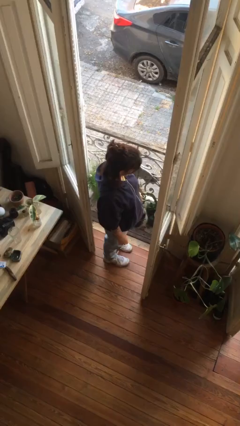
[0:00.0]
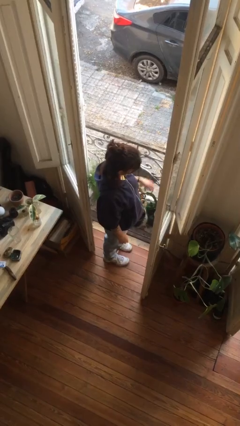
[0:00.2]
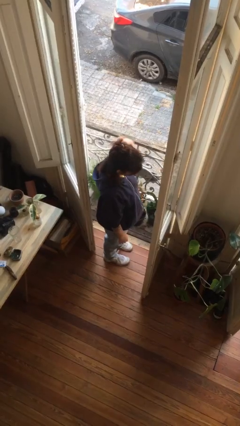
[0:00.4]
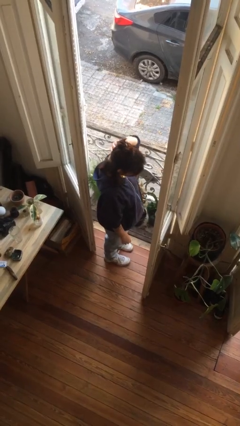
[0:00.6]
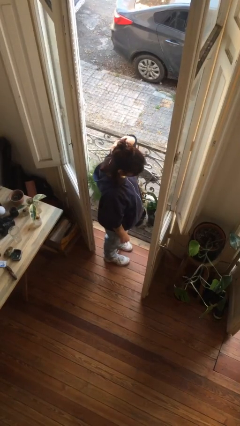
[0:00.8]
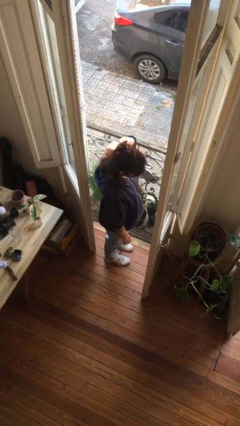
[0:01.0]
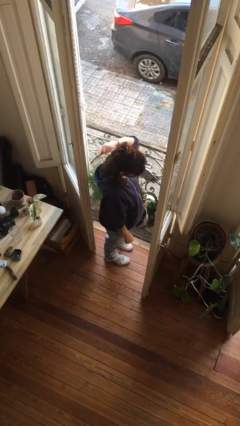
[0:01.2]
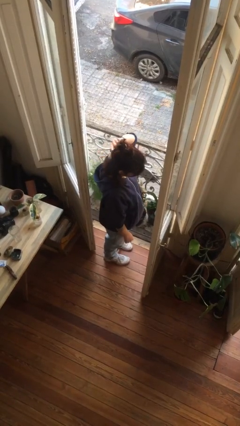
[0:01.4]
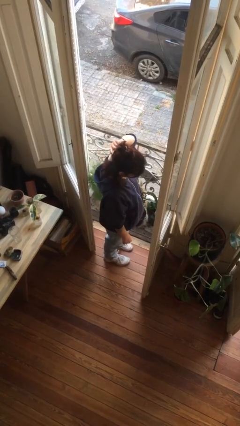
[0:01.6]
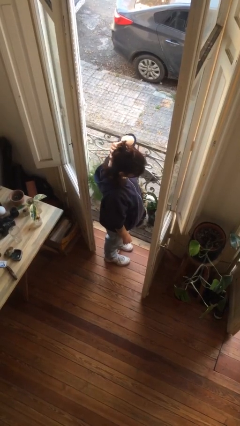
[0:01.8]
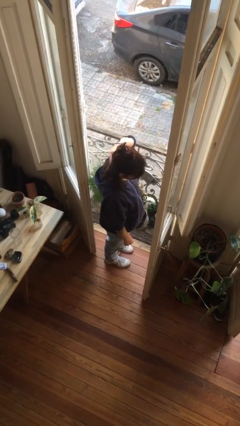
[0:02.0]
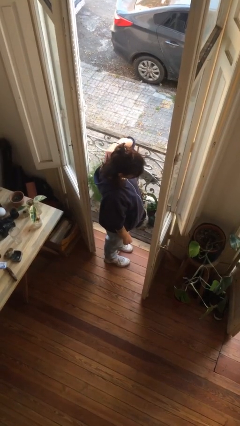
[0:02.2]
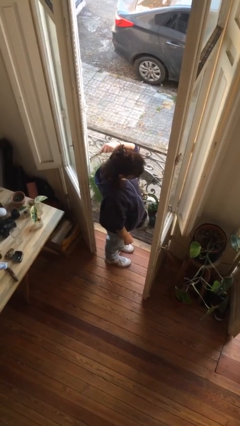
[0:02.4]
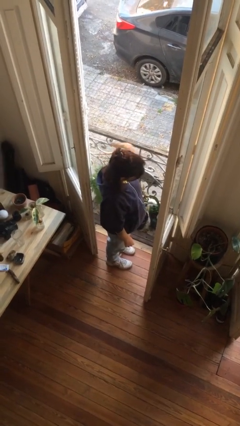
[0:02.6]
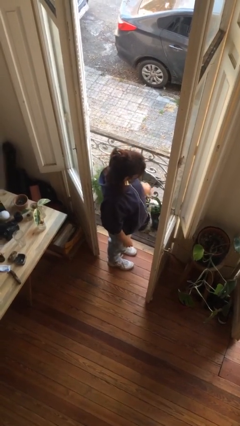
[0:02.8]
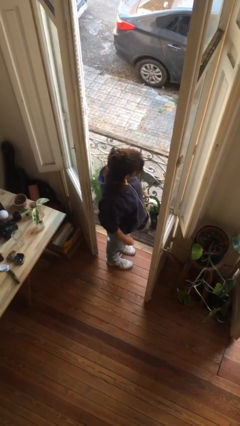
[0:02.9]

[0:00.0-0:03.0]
person brushes hair

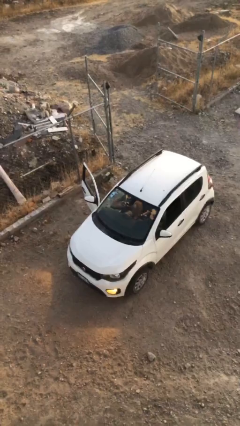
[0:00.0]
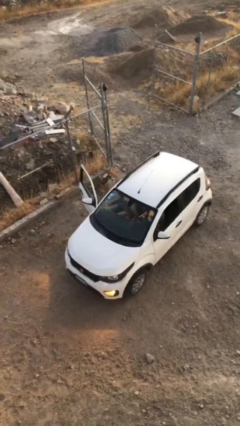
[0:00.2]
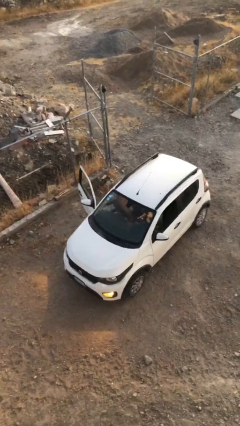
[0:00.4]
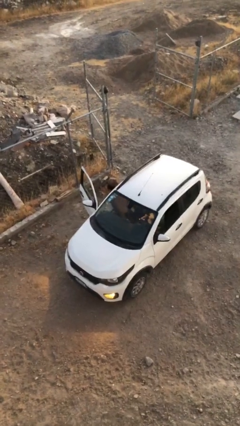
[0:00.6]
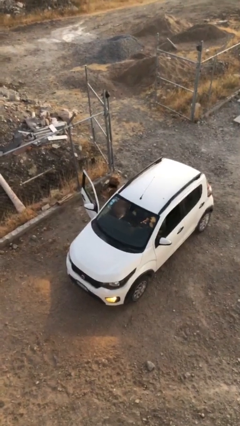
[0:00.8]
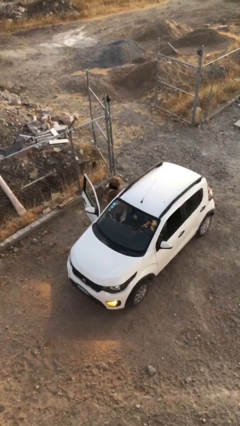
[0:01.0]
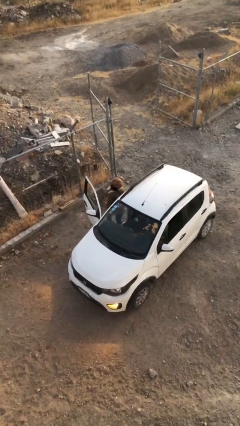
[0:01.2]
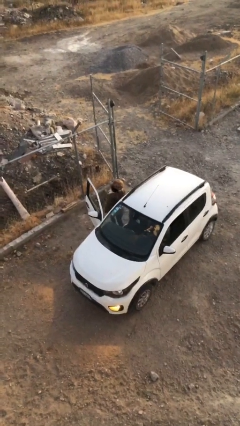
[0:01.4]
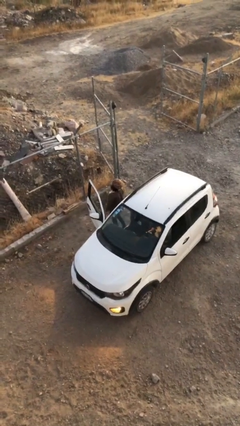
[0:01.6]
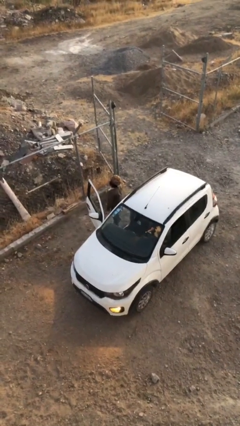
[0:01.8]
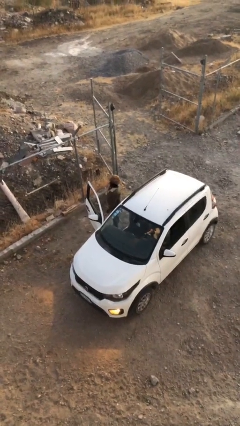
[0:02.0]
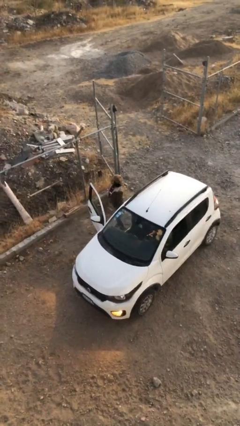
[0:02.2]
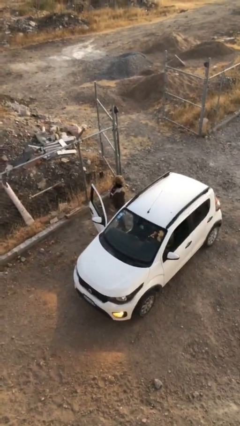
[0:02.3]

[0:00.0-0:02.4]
person exits car

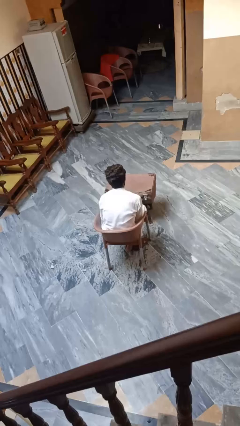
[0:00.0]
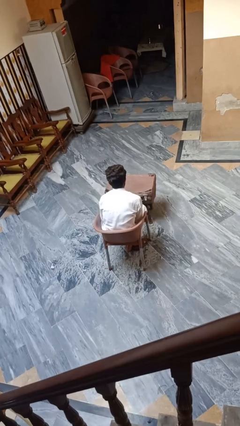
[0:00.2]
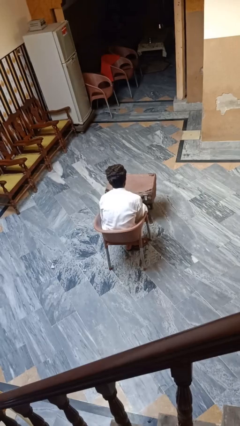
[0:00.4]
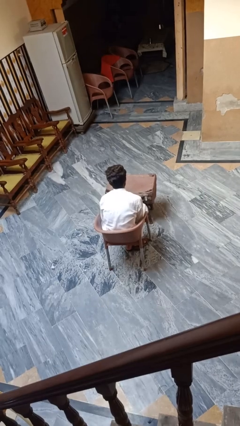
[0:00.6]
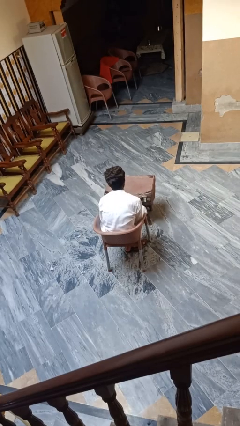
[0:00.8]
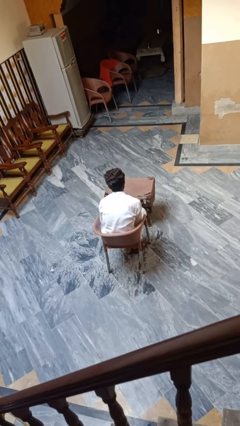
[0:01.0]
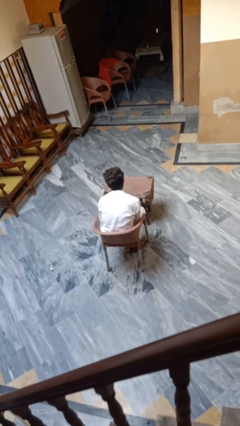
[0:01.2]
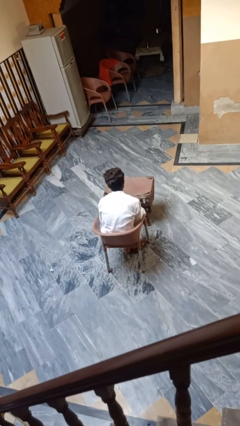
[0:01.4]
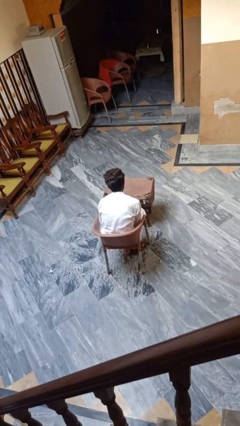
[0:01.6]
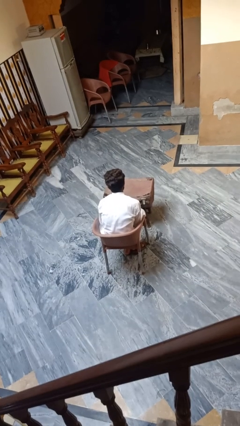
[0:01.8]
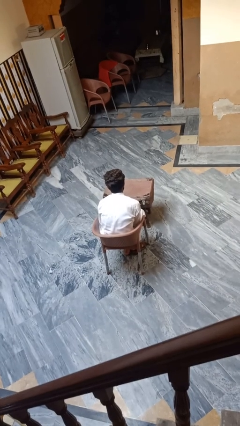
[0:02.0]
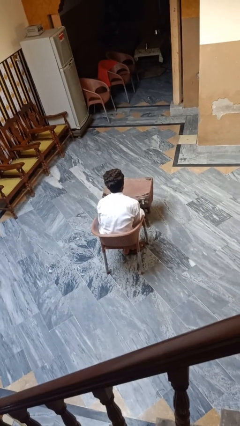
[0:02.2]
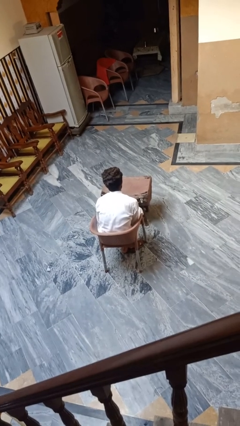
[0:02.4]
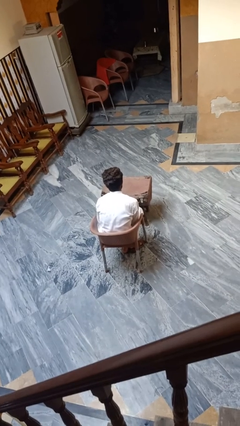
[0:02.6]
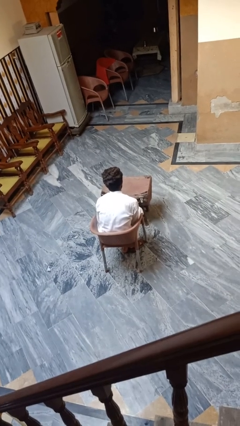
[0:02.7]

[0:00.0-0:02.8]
person opens suitcase

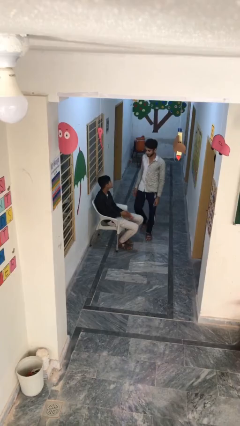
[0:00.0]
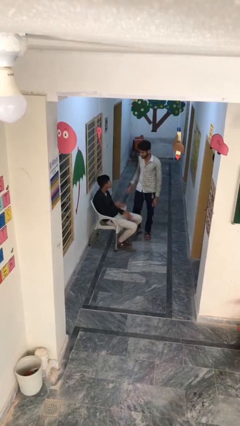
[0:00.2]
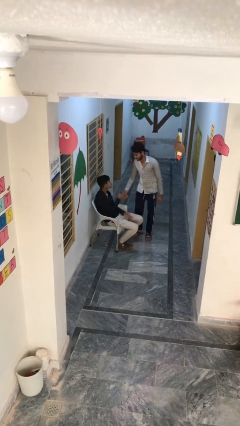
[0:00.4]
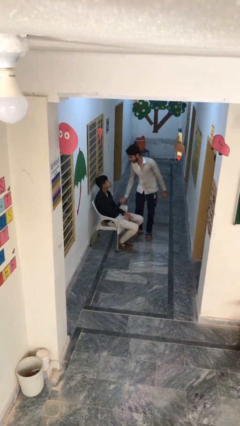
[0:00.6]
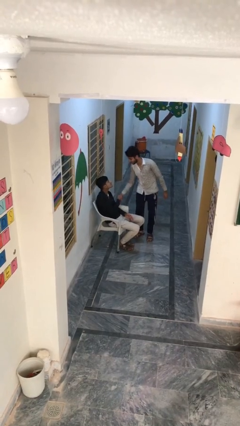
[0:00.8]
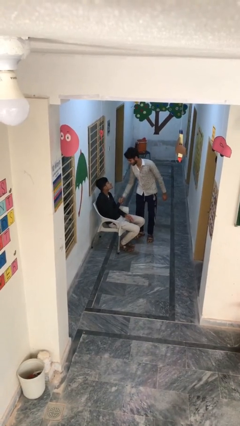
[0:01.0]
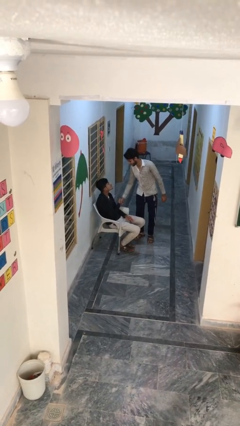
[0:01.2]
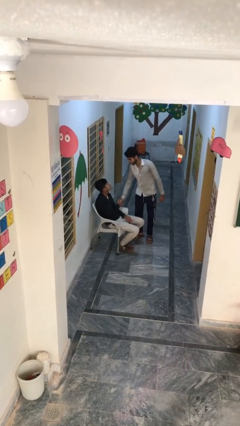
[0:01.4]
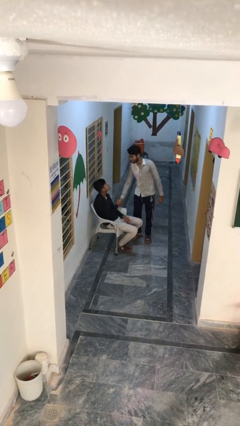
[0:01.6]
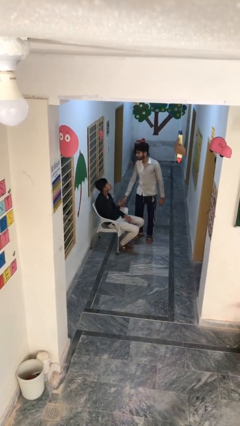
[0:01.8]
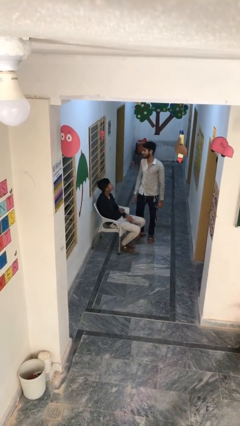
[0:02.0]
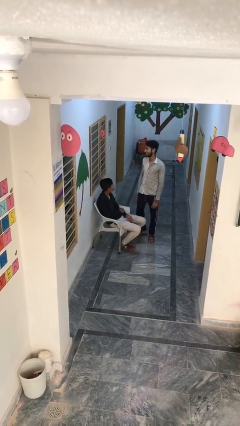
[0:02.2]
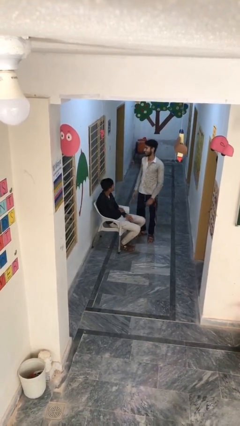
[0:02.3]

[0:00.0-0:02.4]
person shakes hand

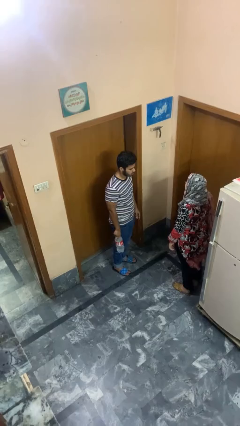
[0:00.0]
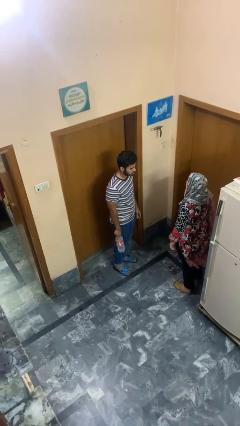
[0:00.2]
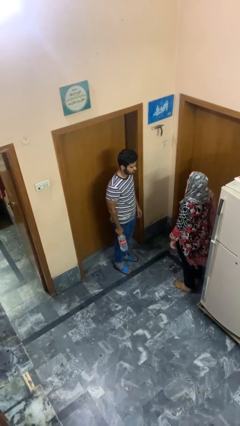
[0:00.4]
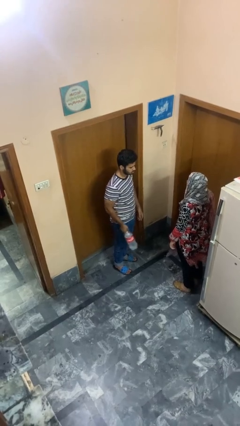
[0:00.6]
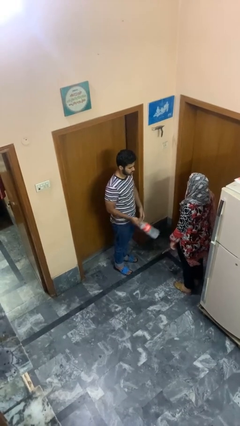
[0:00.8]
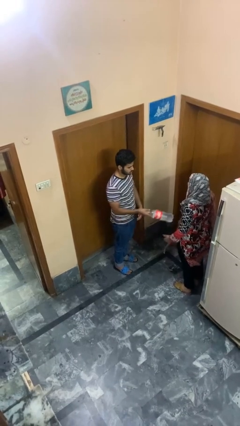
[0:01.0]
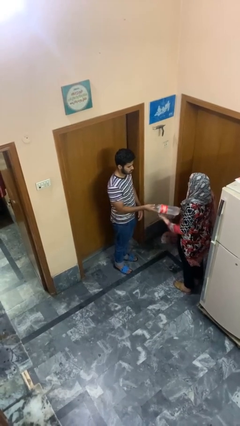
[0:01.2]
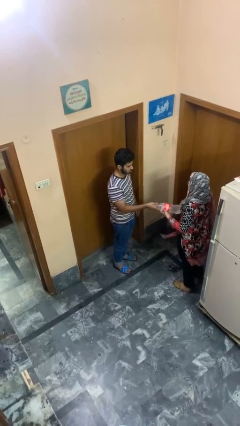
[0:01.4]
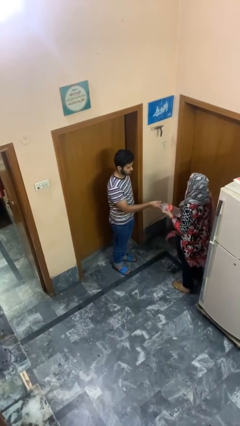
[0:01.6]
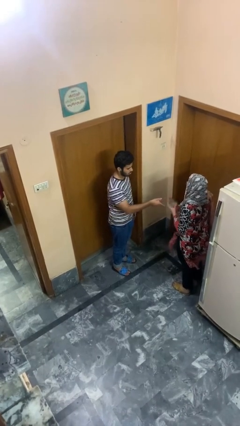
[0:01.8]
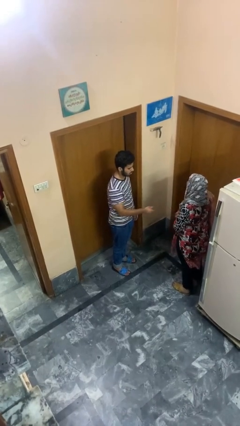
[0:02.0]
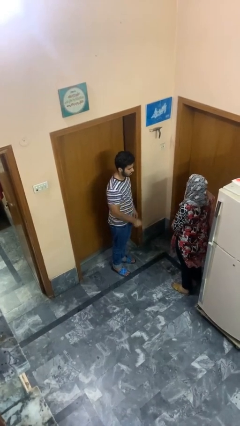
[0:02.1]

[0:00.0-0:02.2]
person transfers object to person

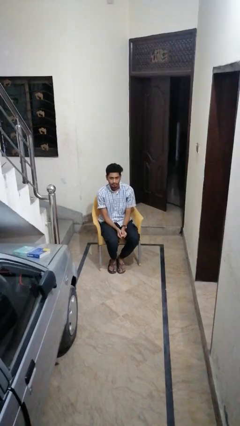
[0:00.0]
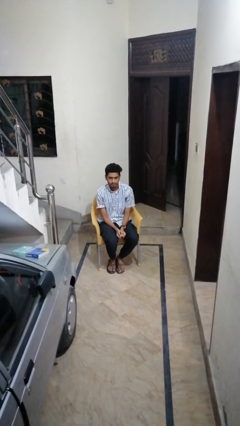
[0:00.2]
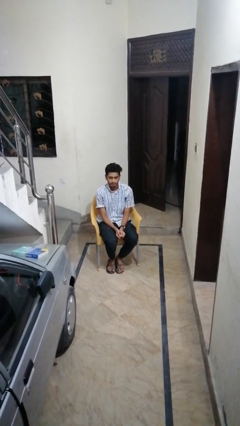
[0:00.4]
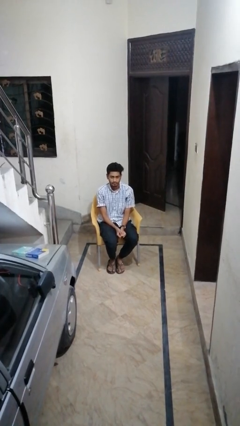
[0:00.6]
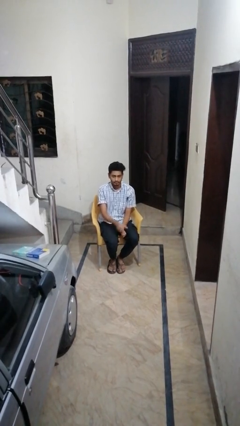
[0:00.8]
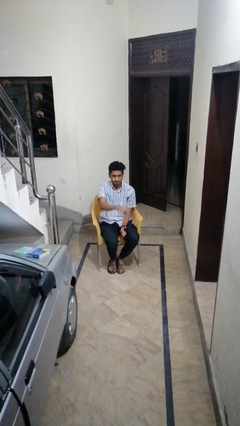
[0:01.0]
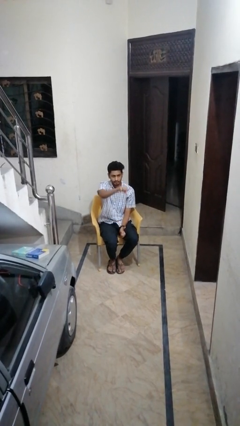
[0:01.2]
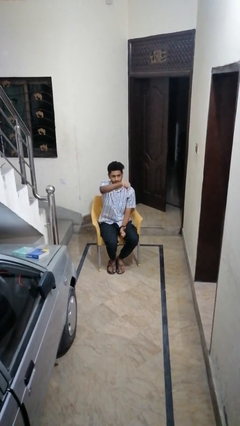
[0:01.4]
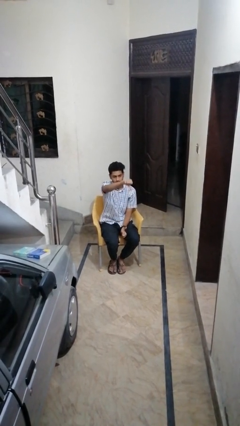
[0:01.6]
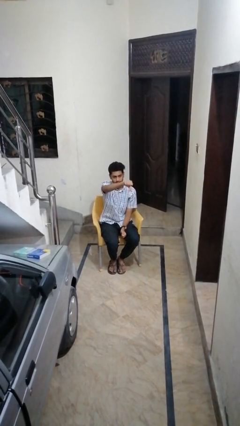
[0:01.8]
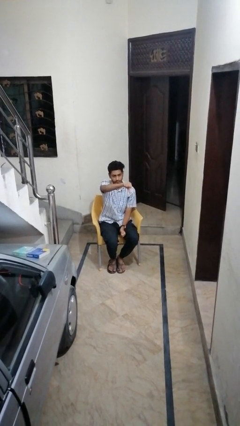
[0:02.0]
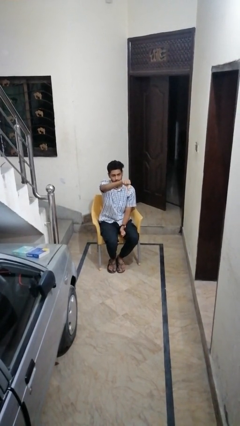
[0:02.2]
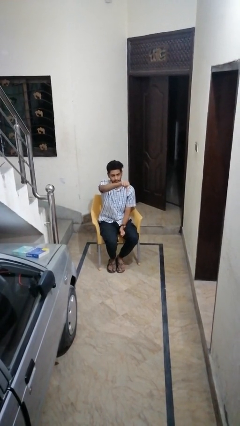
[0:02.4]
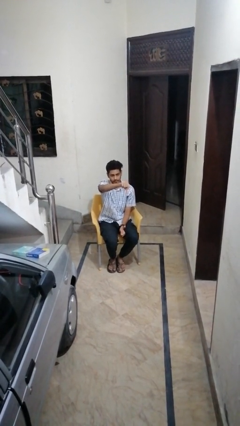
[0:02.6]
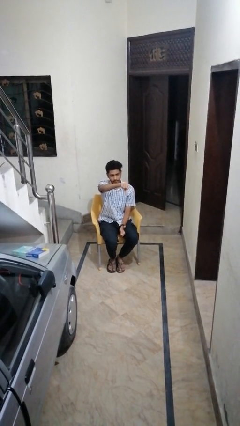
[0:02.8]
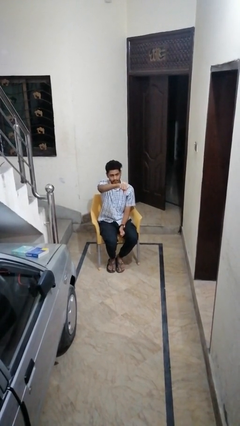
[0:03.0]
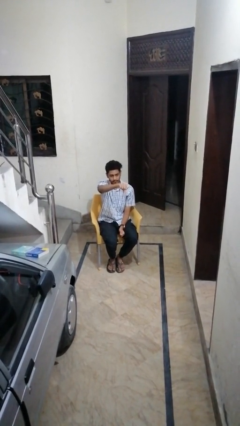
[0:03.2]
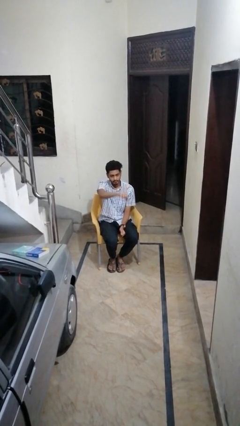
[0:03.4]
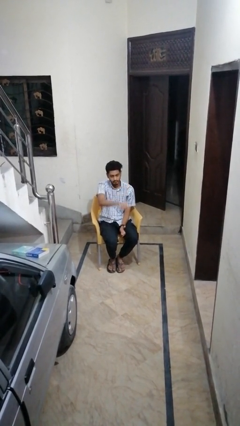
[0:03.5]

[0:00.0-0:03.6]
person gestures thumbs down

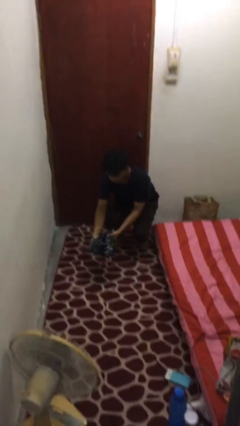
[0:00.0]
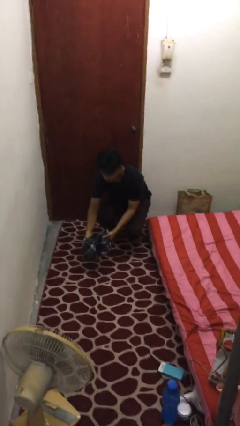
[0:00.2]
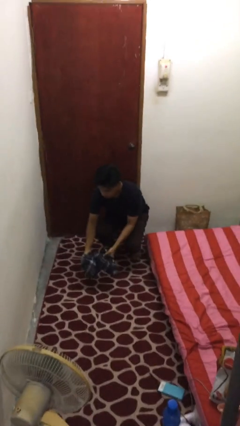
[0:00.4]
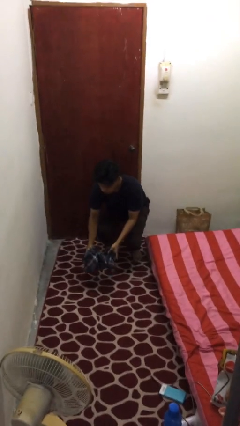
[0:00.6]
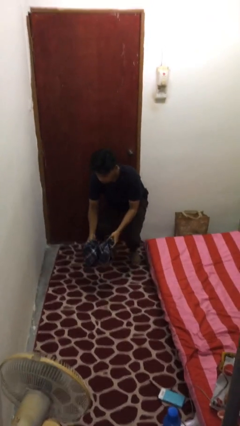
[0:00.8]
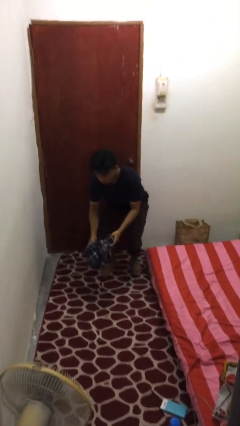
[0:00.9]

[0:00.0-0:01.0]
person catches dropped object
